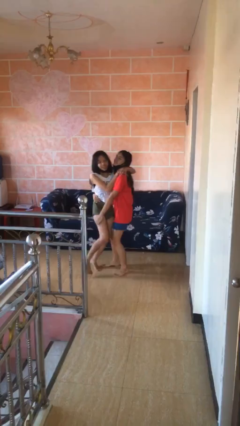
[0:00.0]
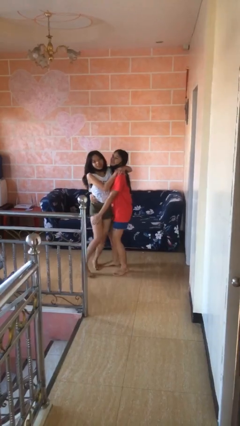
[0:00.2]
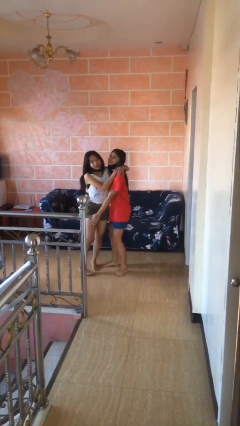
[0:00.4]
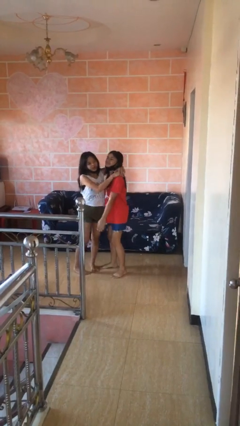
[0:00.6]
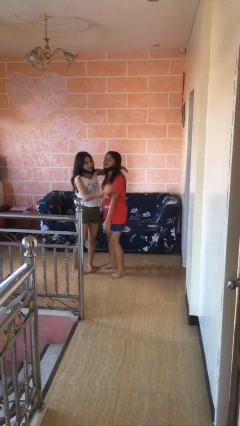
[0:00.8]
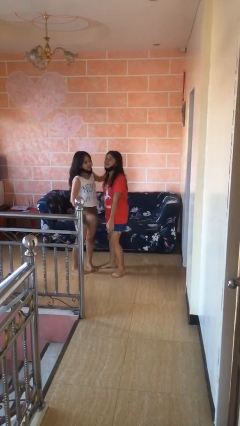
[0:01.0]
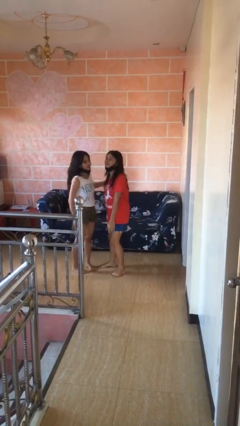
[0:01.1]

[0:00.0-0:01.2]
person puts down person

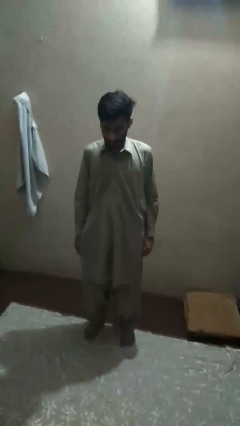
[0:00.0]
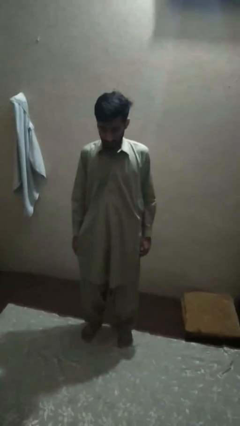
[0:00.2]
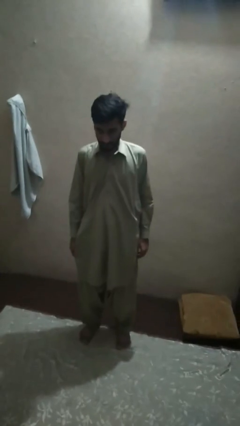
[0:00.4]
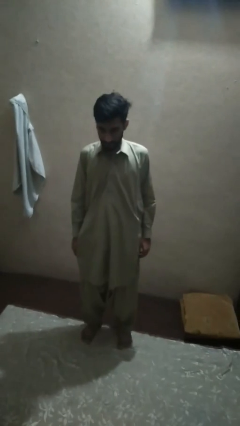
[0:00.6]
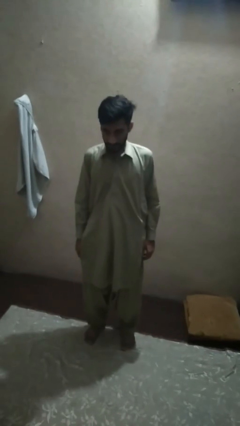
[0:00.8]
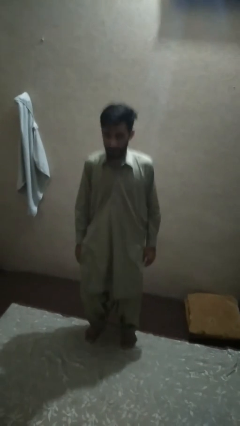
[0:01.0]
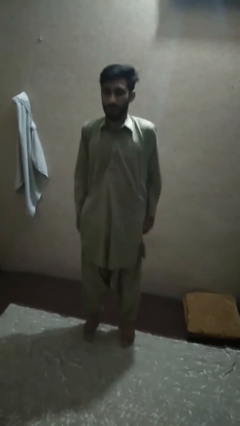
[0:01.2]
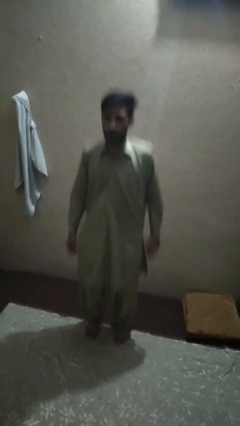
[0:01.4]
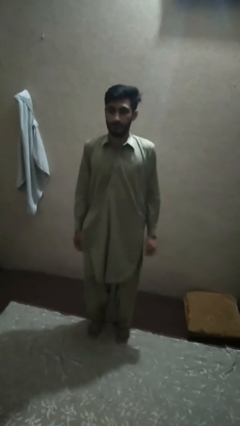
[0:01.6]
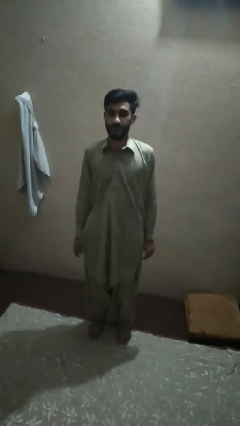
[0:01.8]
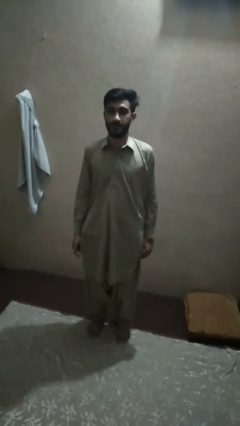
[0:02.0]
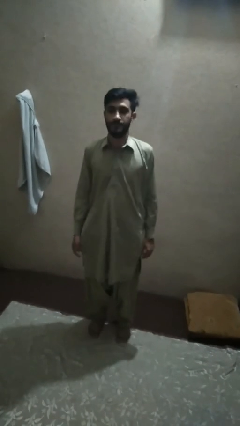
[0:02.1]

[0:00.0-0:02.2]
person jumps

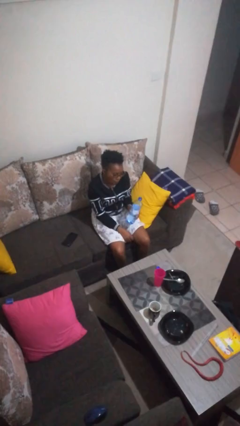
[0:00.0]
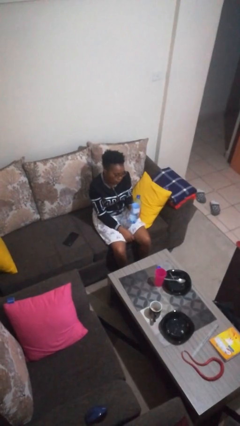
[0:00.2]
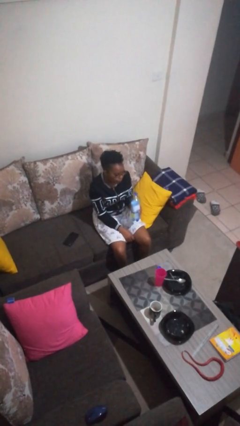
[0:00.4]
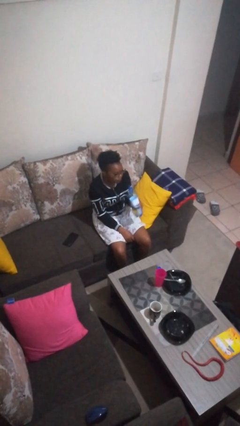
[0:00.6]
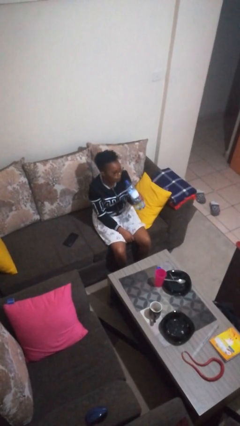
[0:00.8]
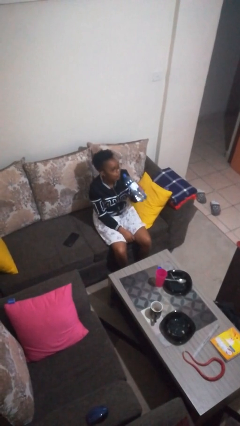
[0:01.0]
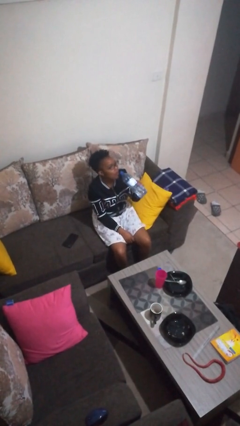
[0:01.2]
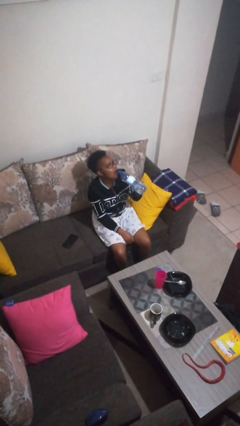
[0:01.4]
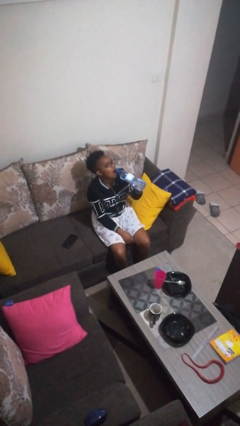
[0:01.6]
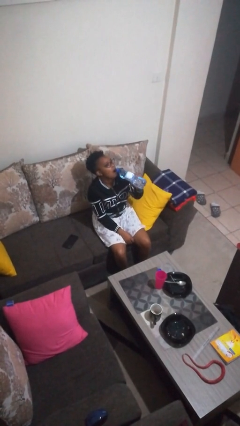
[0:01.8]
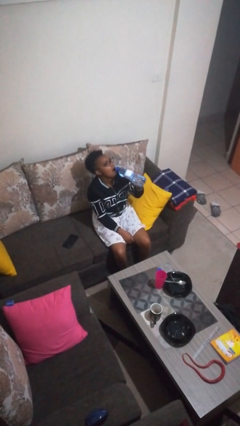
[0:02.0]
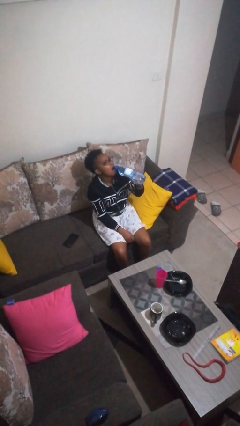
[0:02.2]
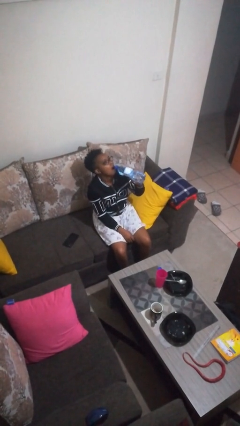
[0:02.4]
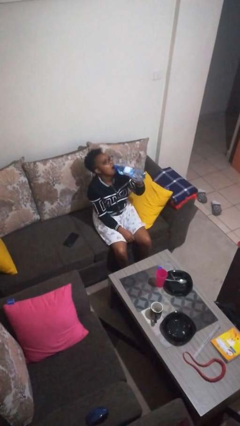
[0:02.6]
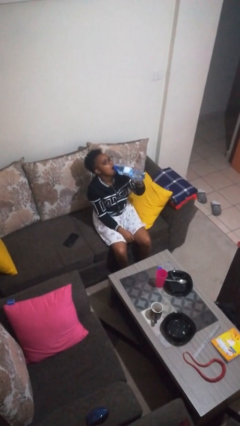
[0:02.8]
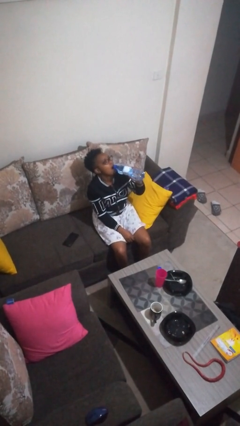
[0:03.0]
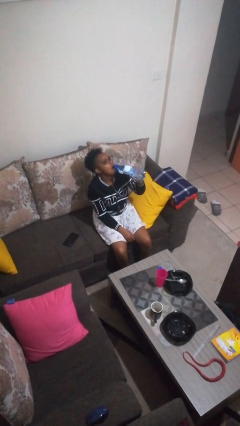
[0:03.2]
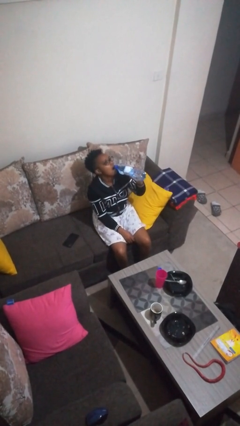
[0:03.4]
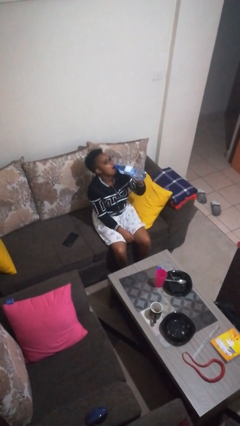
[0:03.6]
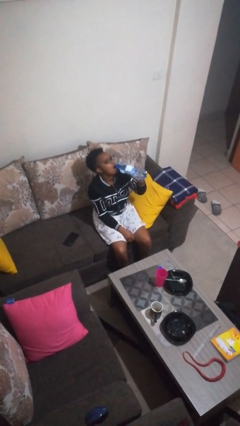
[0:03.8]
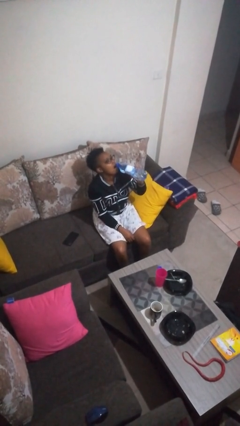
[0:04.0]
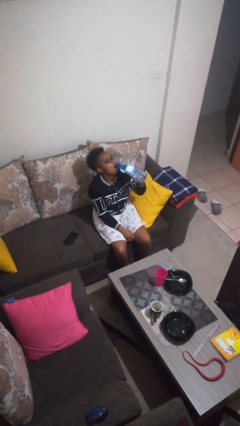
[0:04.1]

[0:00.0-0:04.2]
person drinks from bottle

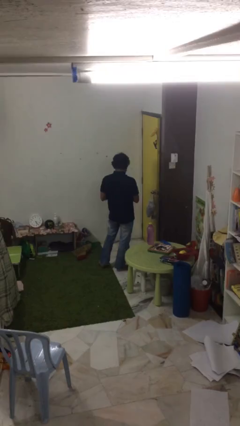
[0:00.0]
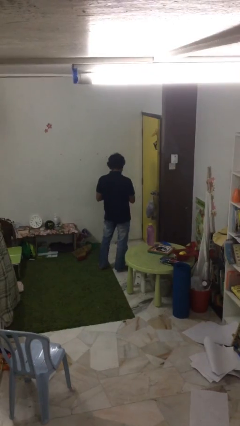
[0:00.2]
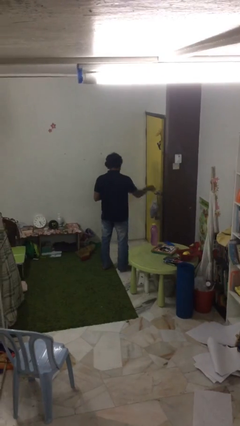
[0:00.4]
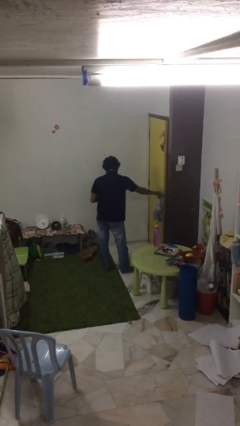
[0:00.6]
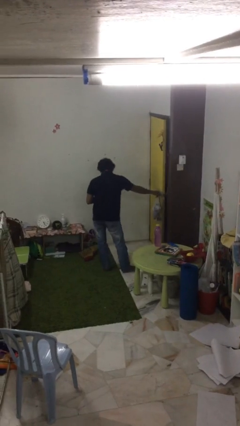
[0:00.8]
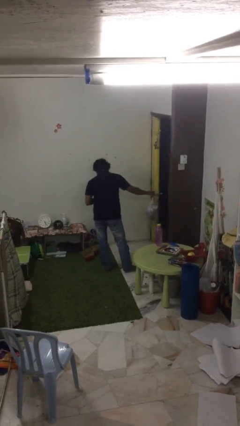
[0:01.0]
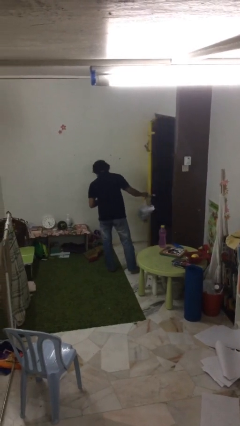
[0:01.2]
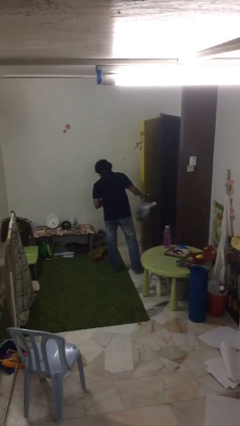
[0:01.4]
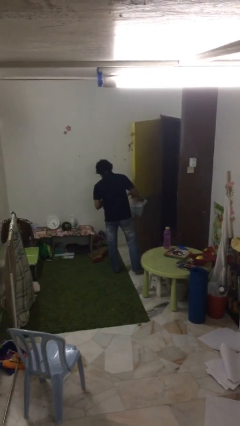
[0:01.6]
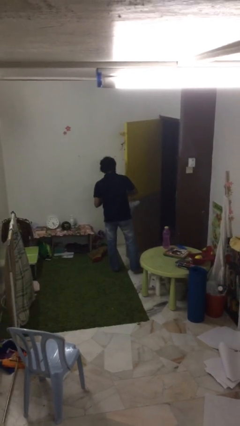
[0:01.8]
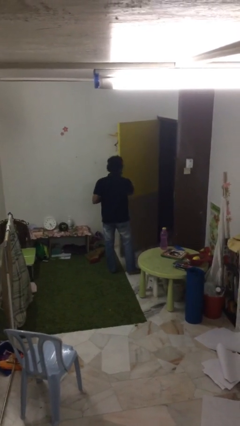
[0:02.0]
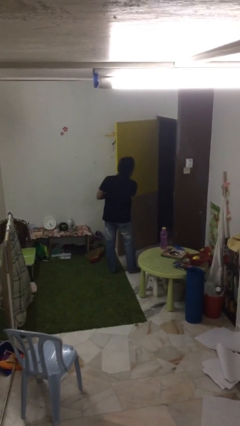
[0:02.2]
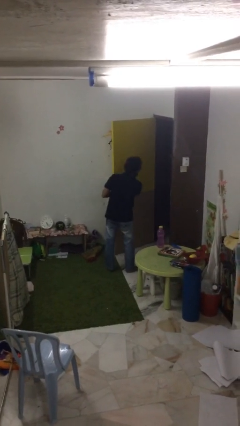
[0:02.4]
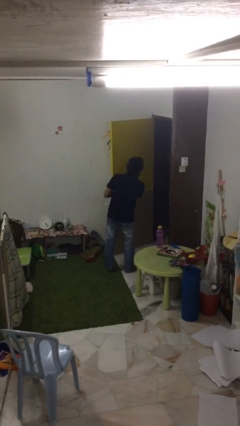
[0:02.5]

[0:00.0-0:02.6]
person opens facility door

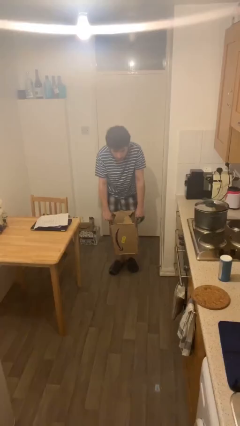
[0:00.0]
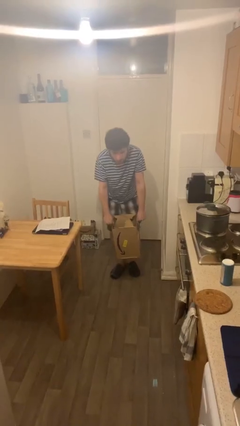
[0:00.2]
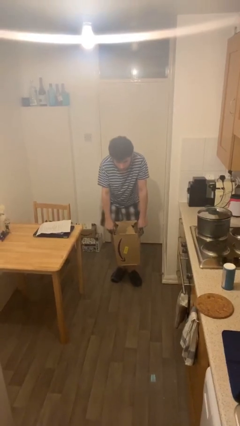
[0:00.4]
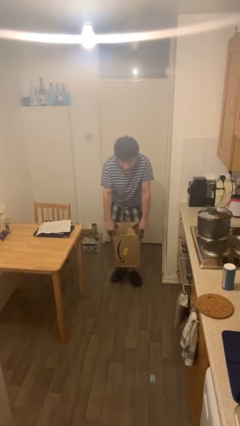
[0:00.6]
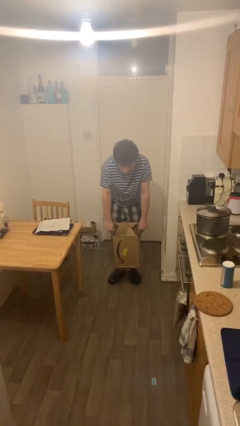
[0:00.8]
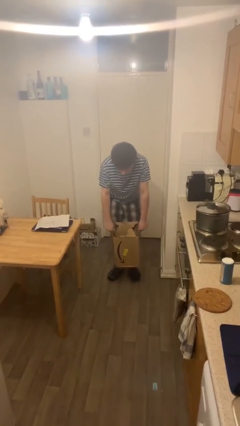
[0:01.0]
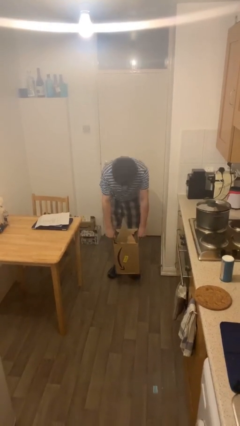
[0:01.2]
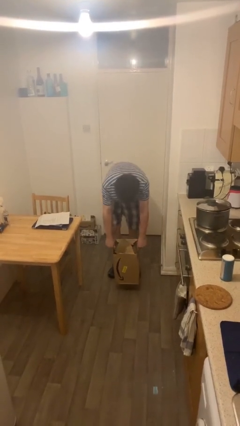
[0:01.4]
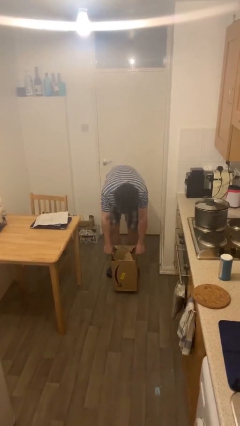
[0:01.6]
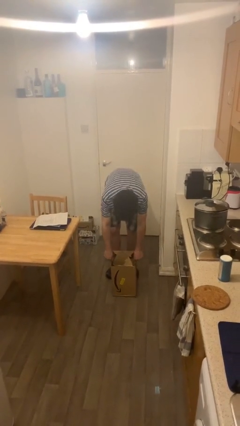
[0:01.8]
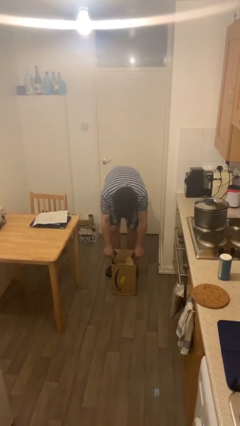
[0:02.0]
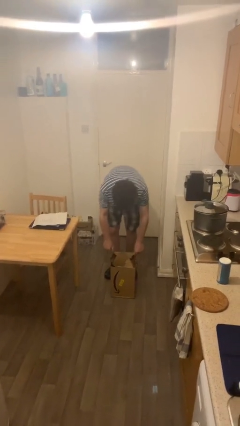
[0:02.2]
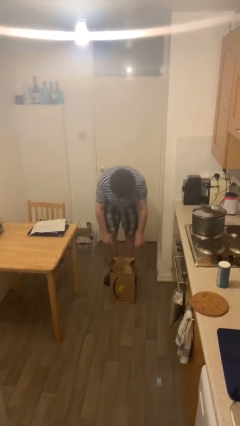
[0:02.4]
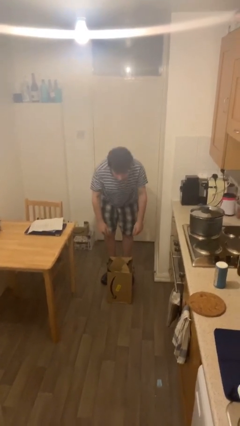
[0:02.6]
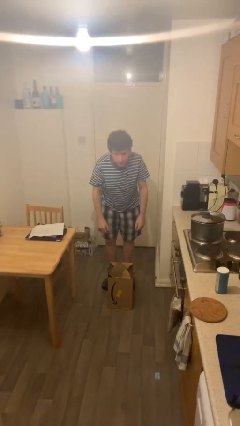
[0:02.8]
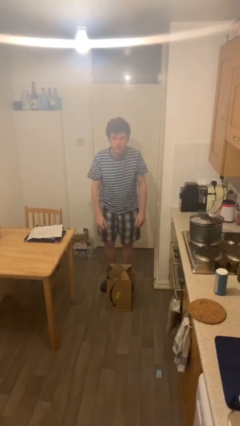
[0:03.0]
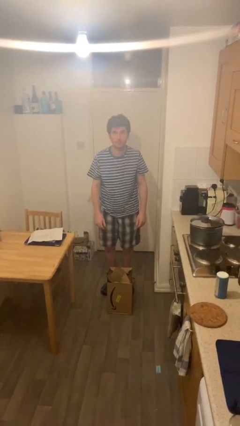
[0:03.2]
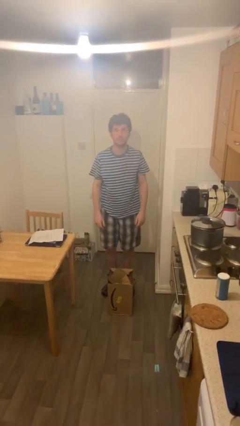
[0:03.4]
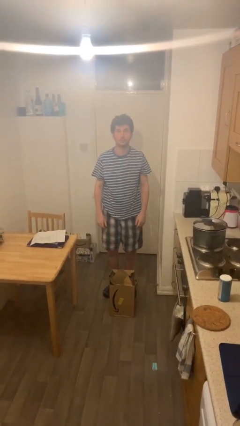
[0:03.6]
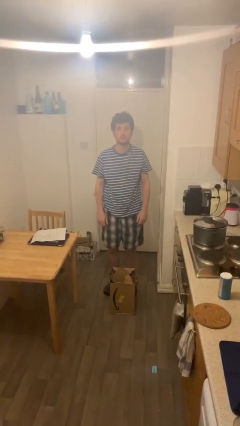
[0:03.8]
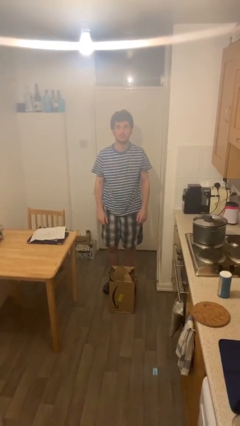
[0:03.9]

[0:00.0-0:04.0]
person puts down object on floor

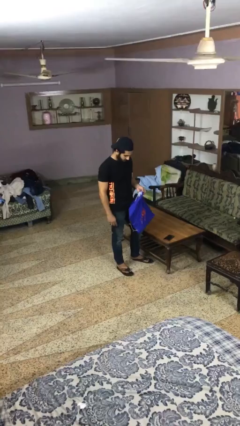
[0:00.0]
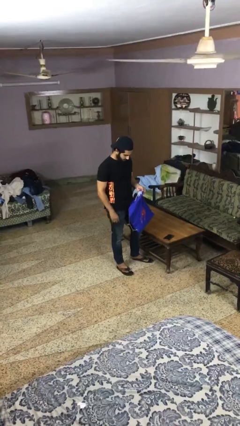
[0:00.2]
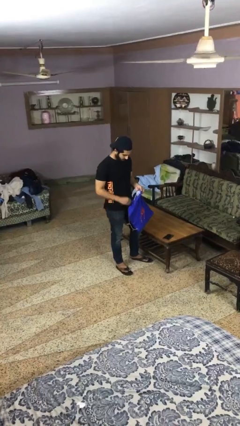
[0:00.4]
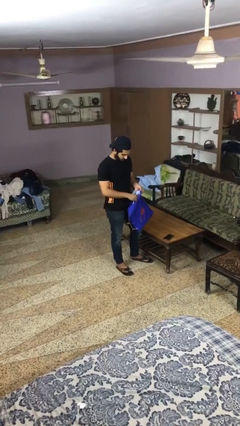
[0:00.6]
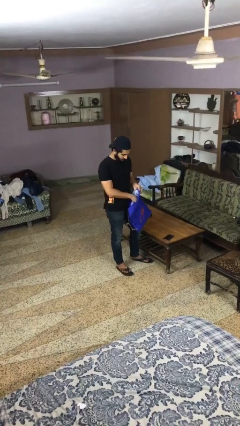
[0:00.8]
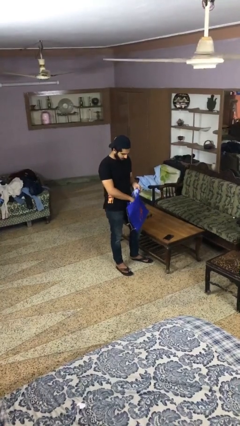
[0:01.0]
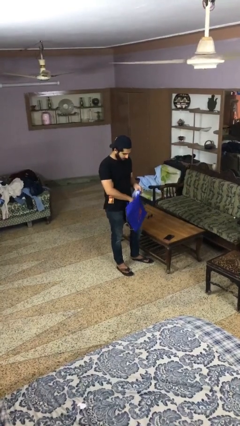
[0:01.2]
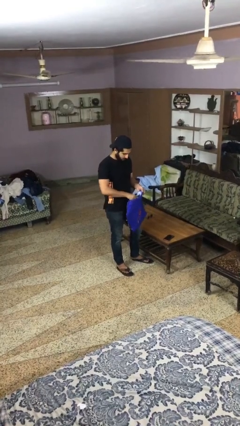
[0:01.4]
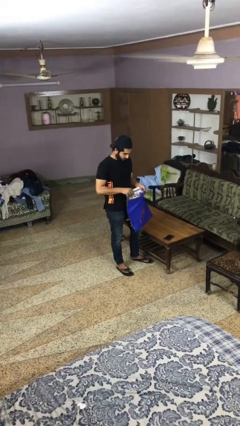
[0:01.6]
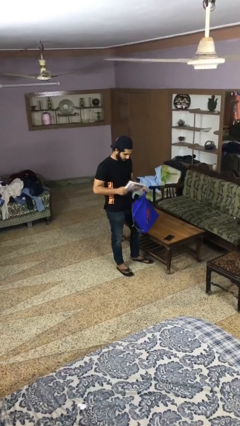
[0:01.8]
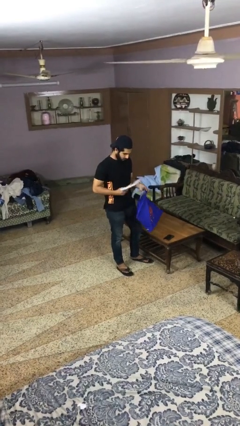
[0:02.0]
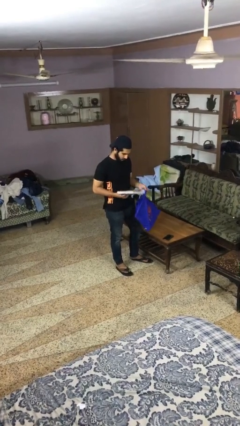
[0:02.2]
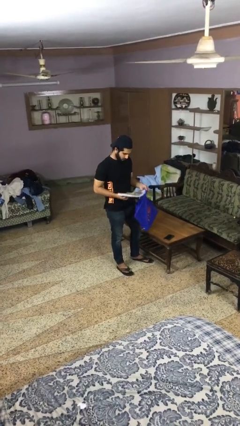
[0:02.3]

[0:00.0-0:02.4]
person takes object from bag

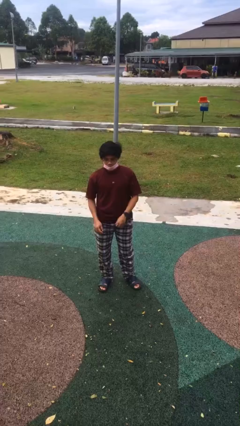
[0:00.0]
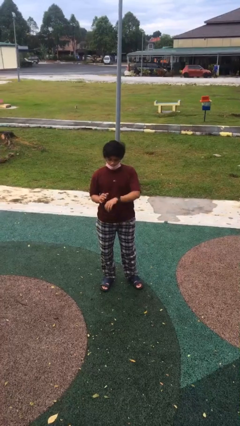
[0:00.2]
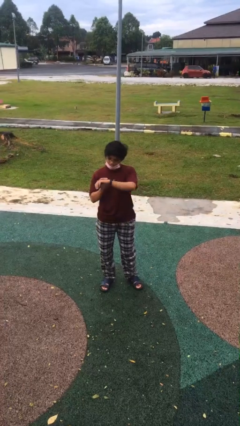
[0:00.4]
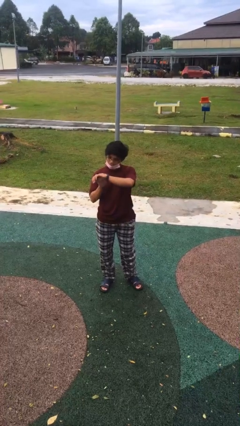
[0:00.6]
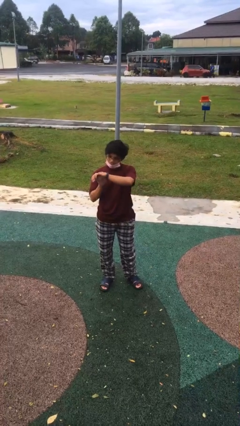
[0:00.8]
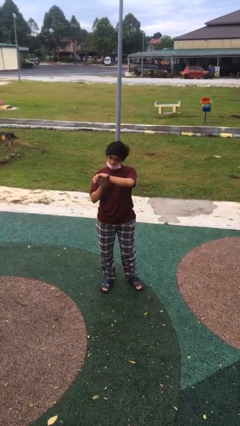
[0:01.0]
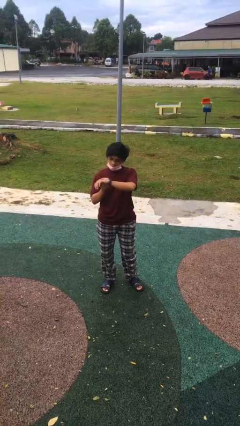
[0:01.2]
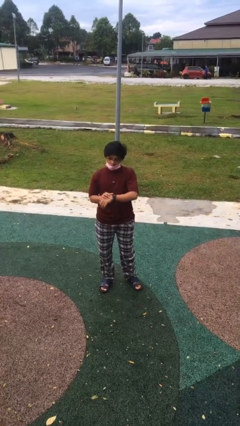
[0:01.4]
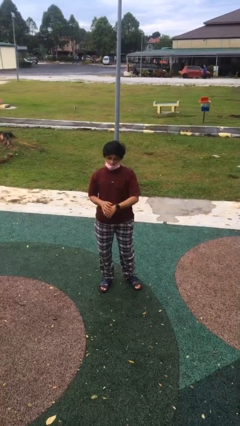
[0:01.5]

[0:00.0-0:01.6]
person looks at wristwatch
